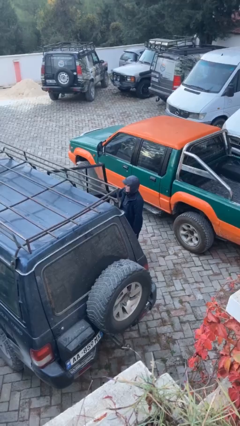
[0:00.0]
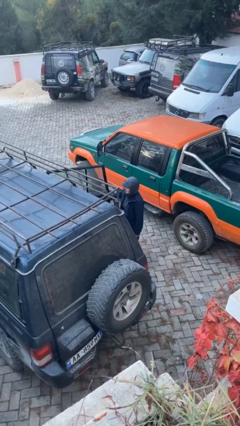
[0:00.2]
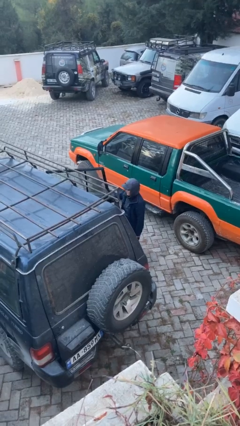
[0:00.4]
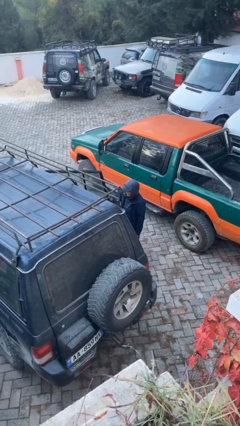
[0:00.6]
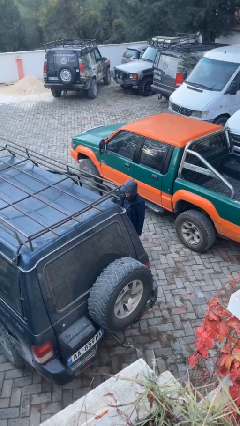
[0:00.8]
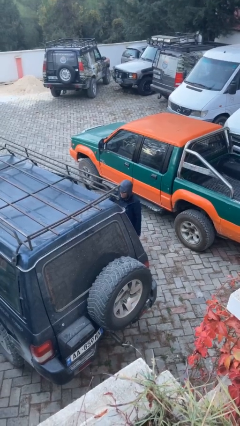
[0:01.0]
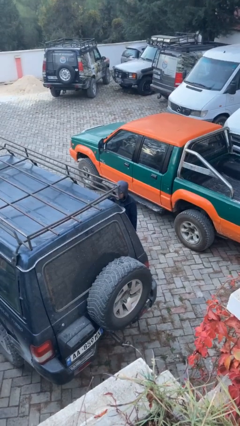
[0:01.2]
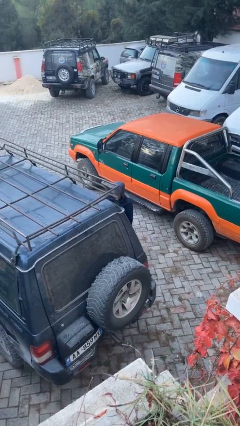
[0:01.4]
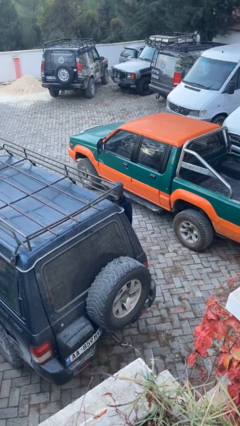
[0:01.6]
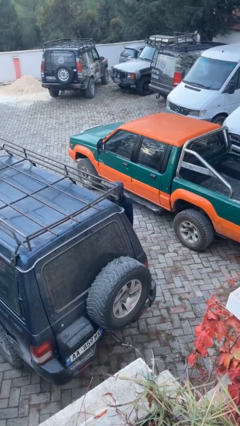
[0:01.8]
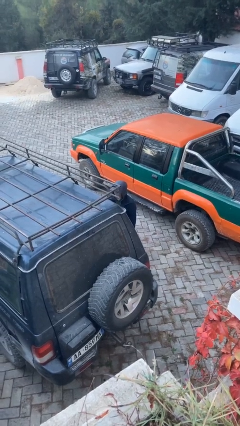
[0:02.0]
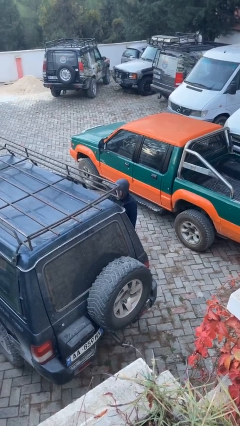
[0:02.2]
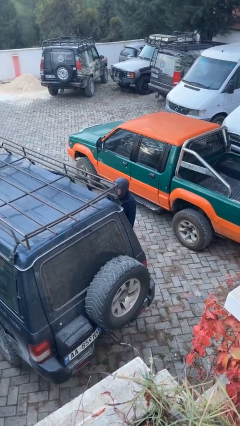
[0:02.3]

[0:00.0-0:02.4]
person closes car door

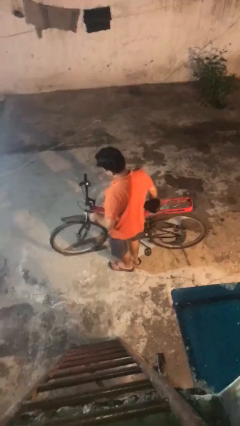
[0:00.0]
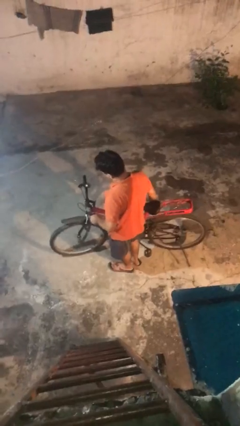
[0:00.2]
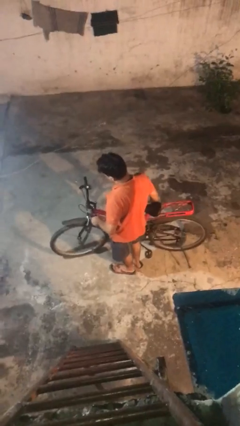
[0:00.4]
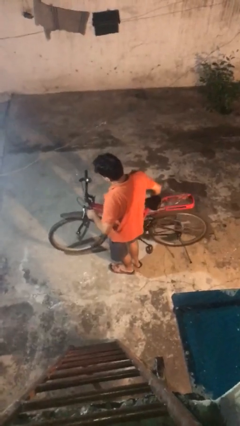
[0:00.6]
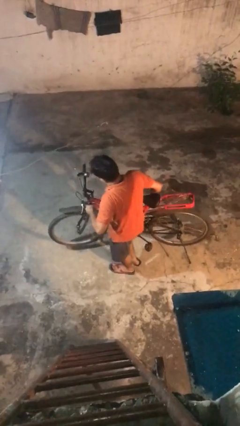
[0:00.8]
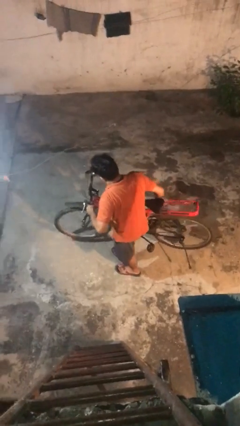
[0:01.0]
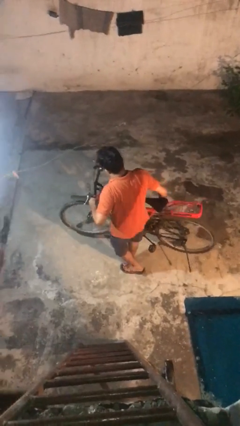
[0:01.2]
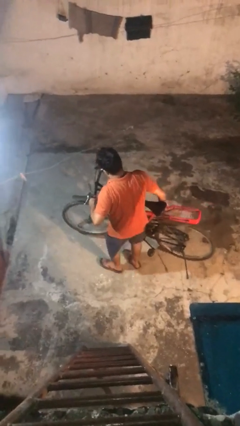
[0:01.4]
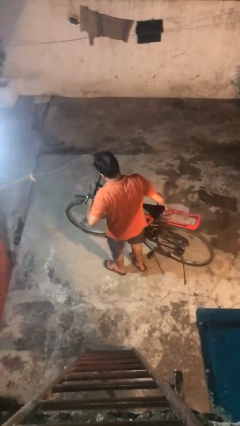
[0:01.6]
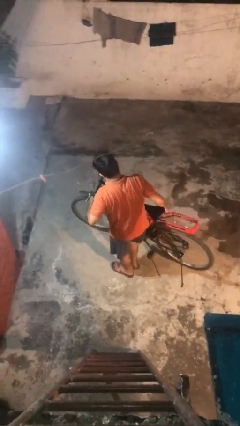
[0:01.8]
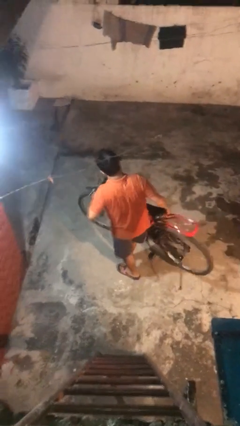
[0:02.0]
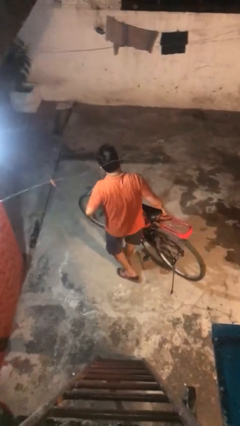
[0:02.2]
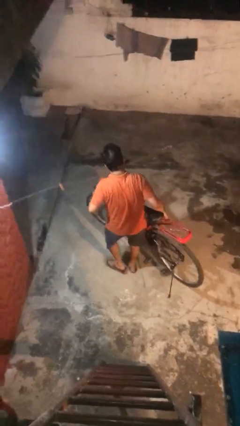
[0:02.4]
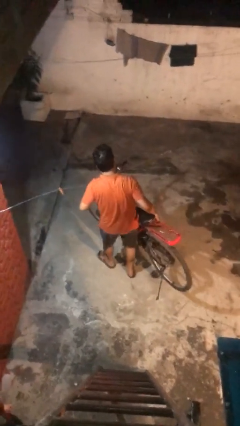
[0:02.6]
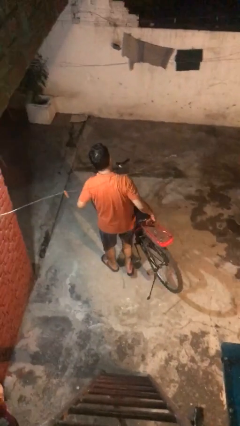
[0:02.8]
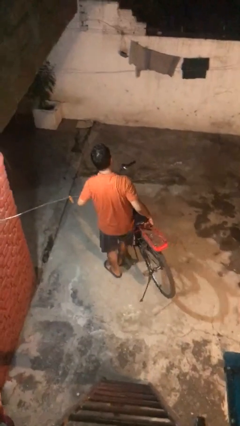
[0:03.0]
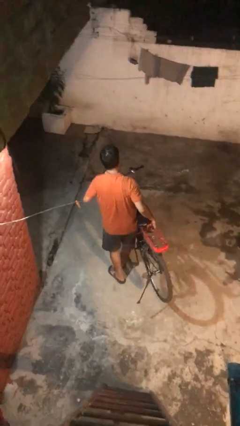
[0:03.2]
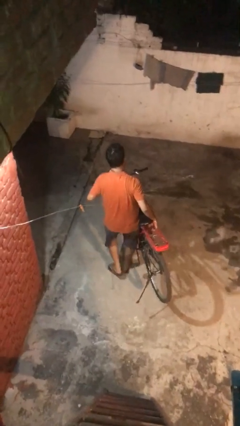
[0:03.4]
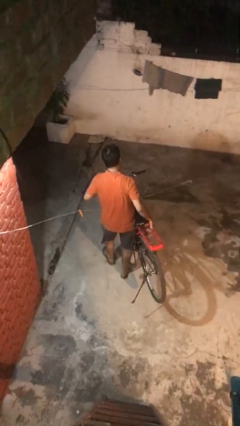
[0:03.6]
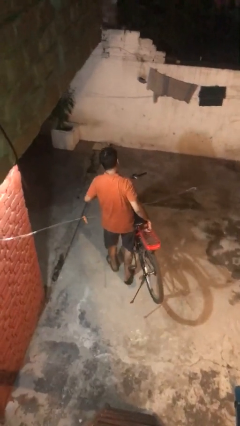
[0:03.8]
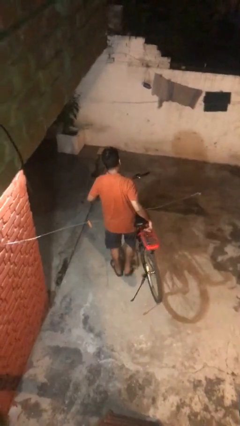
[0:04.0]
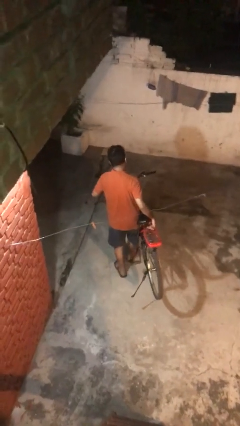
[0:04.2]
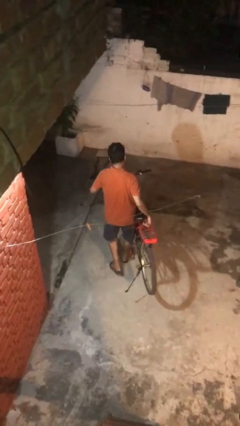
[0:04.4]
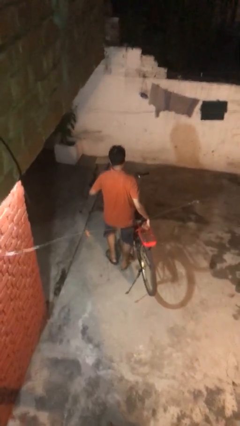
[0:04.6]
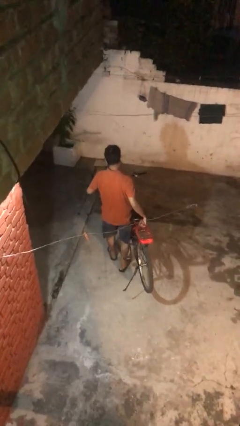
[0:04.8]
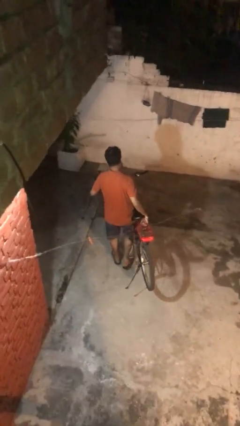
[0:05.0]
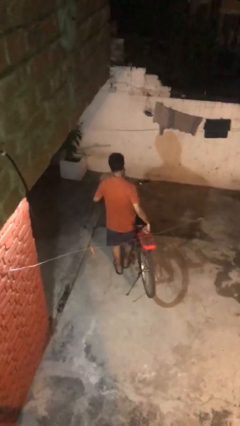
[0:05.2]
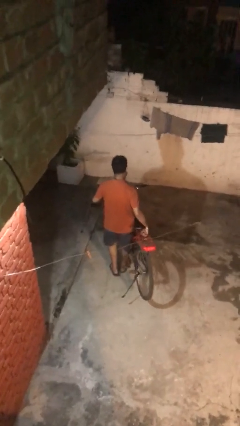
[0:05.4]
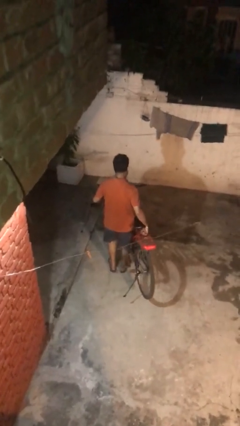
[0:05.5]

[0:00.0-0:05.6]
person carries bicycle

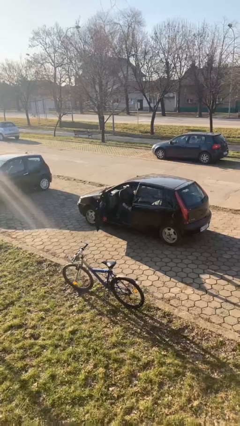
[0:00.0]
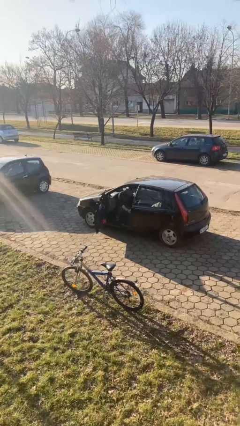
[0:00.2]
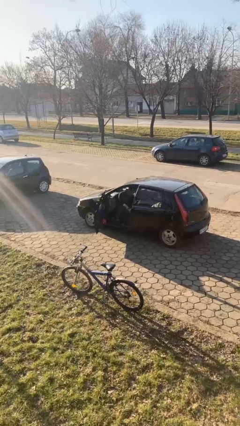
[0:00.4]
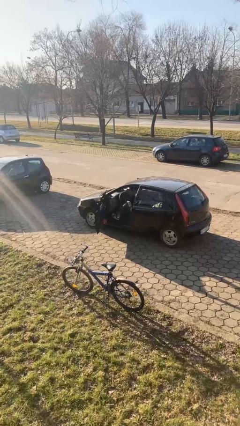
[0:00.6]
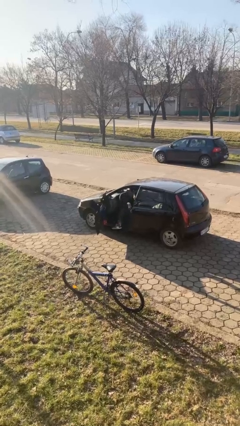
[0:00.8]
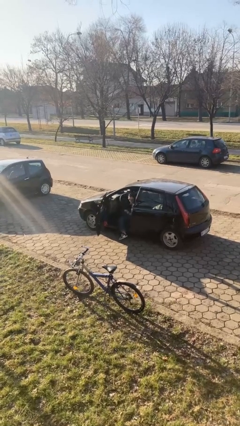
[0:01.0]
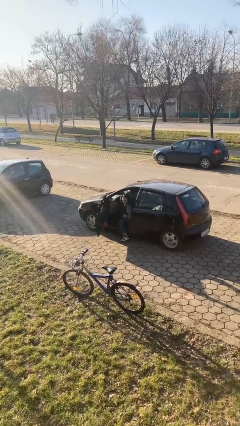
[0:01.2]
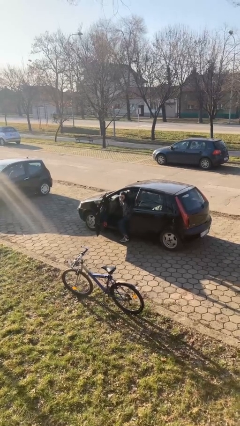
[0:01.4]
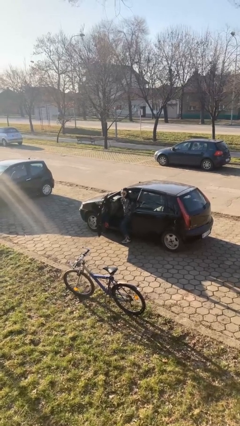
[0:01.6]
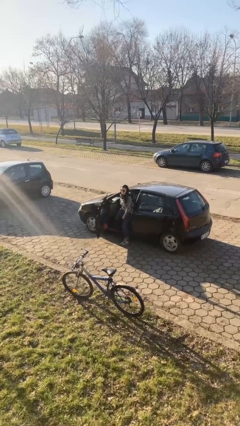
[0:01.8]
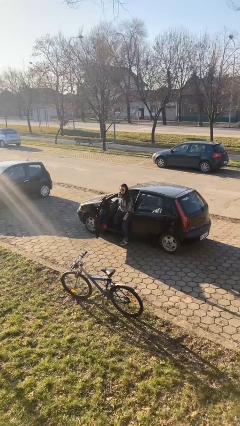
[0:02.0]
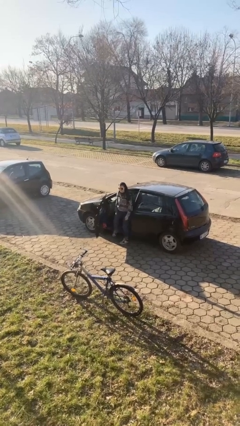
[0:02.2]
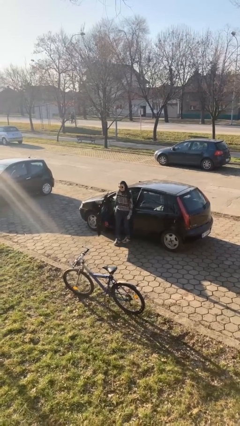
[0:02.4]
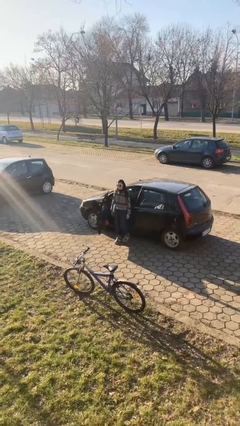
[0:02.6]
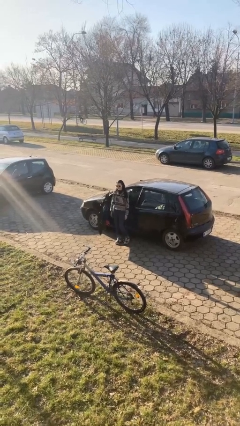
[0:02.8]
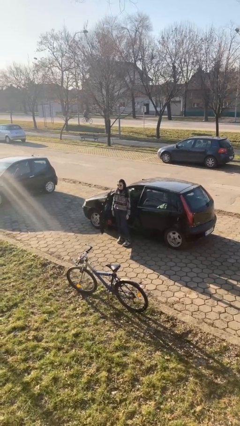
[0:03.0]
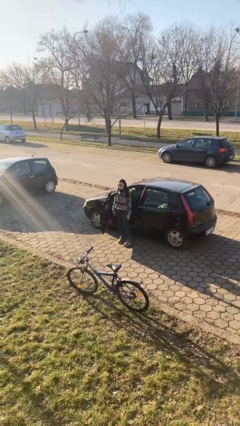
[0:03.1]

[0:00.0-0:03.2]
person exits car

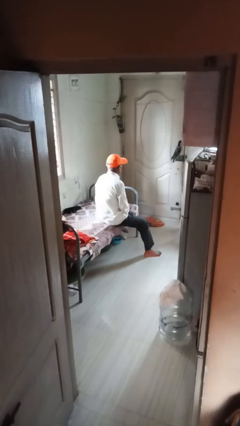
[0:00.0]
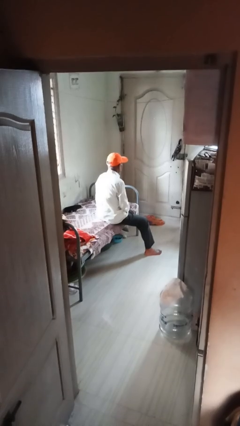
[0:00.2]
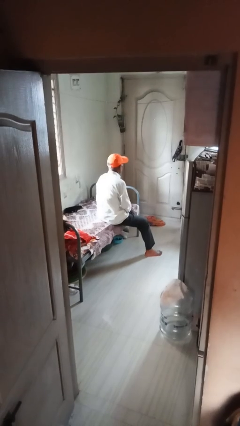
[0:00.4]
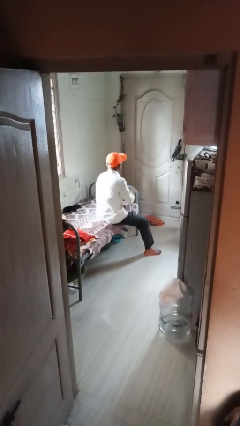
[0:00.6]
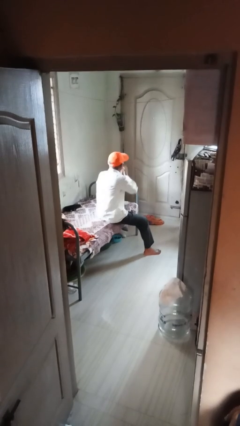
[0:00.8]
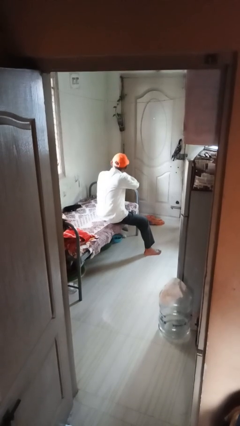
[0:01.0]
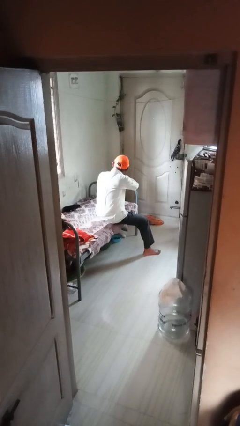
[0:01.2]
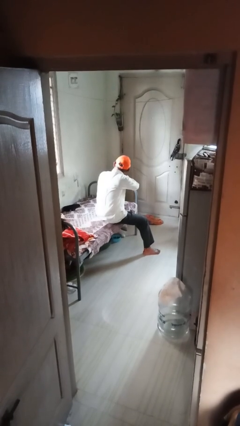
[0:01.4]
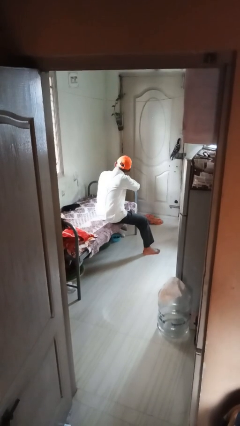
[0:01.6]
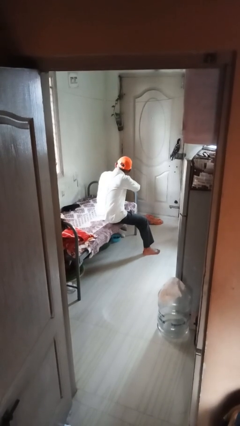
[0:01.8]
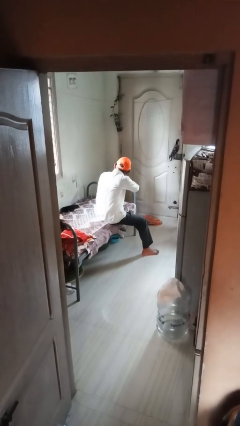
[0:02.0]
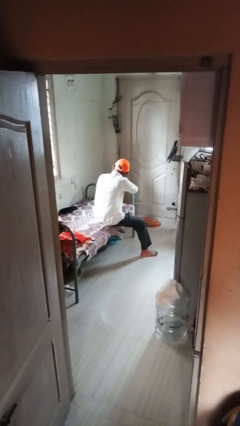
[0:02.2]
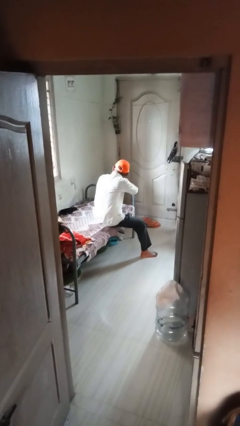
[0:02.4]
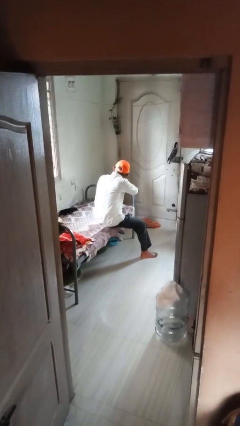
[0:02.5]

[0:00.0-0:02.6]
person prays

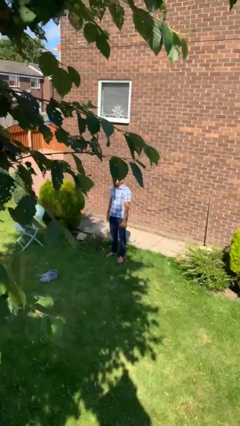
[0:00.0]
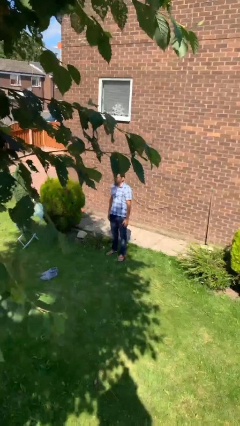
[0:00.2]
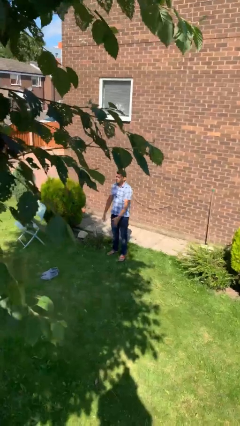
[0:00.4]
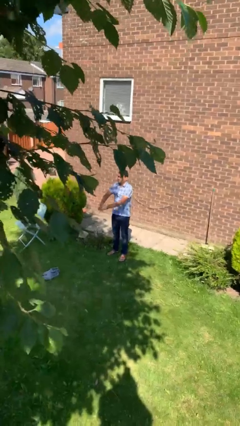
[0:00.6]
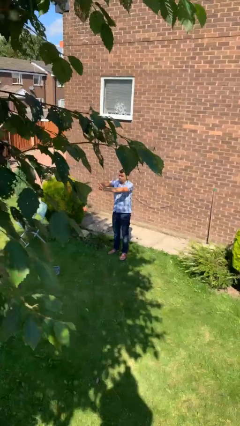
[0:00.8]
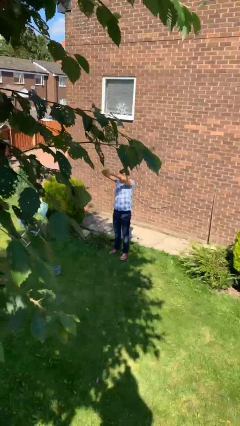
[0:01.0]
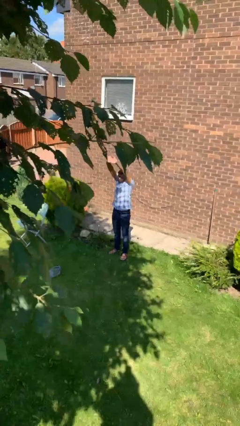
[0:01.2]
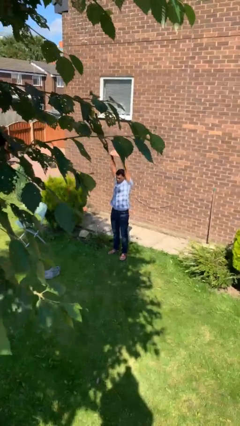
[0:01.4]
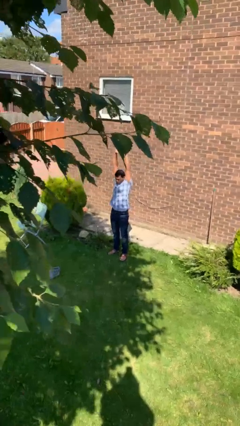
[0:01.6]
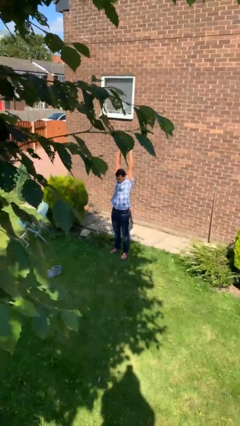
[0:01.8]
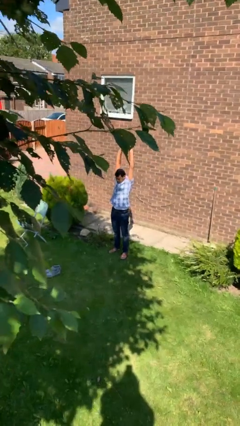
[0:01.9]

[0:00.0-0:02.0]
person stretches arms over head

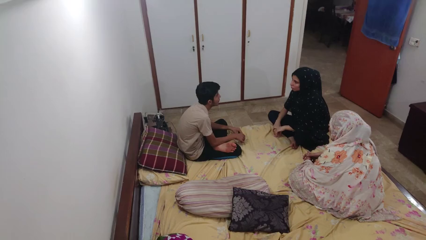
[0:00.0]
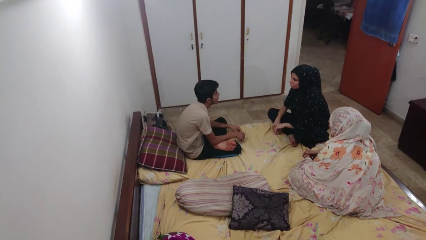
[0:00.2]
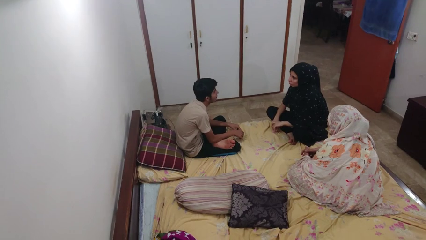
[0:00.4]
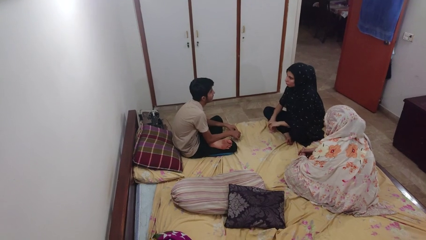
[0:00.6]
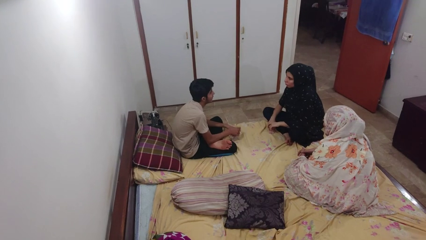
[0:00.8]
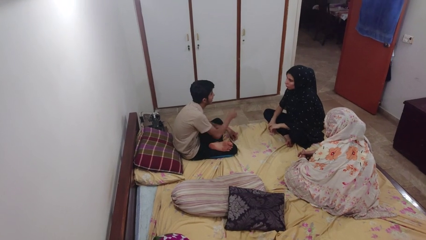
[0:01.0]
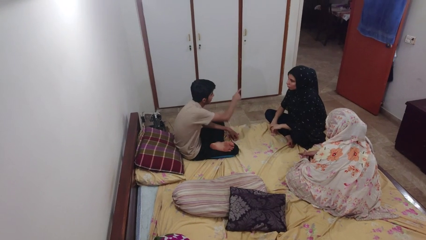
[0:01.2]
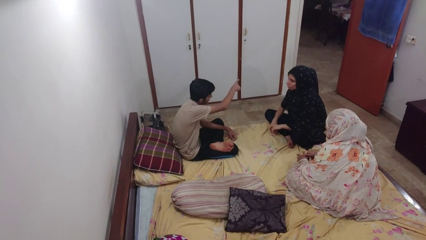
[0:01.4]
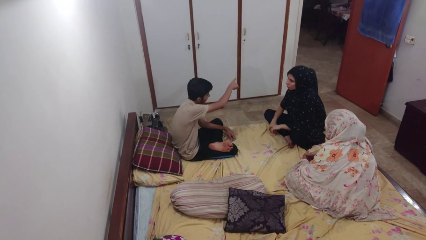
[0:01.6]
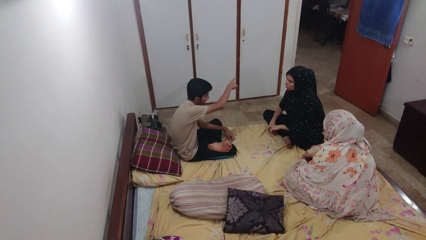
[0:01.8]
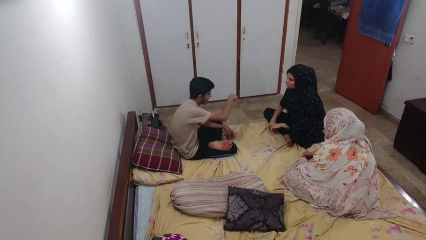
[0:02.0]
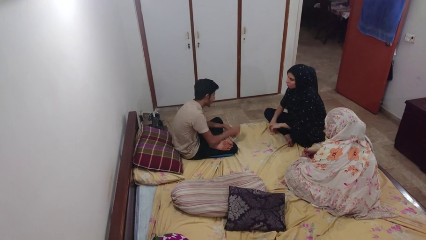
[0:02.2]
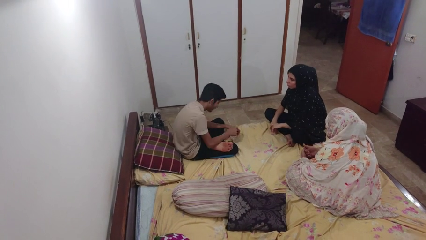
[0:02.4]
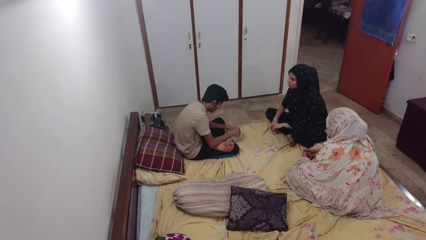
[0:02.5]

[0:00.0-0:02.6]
person points at person
